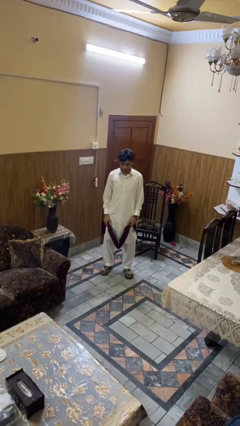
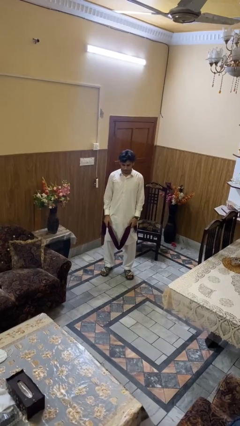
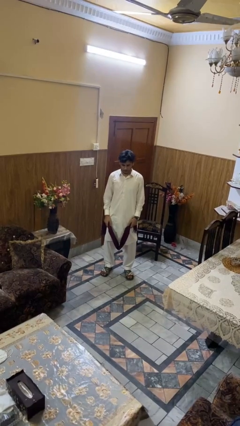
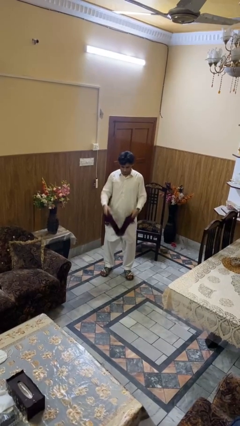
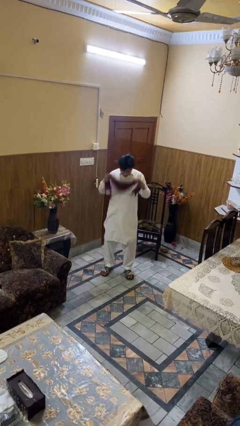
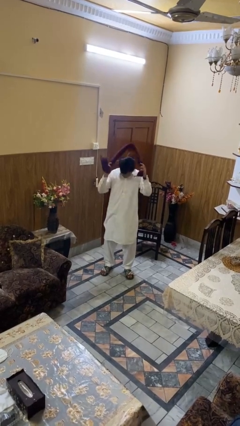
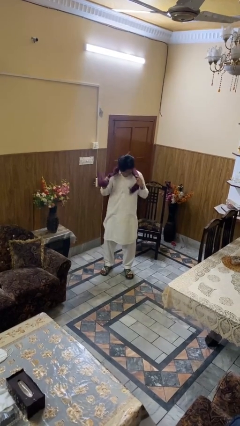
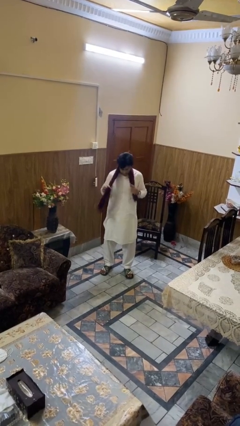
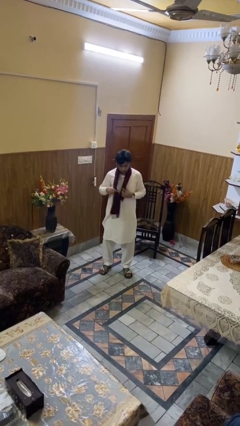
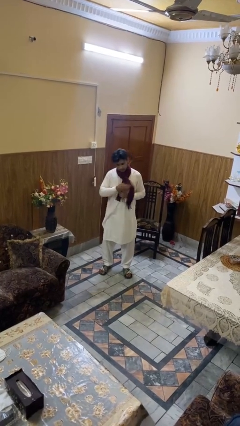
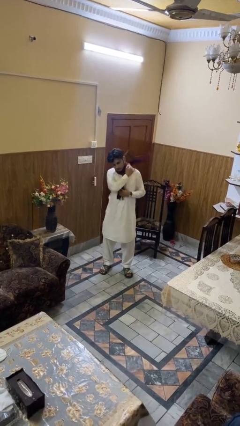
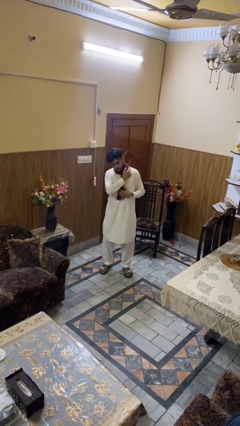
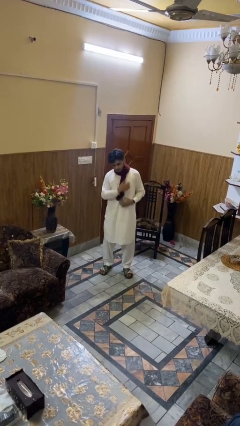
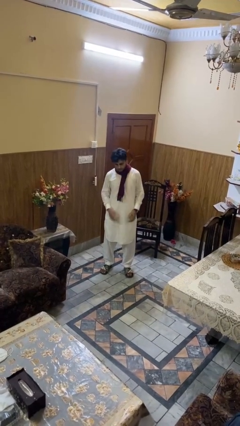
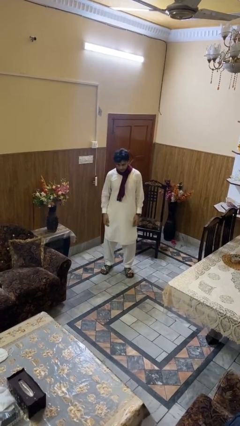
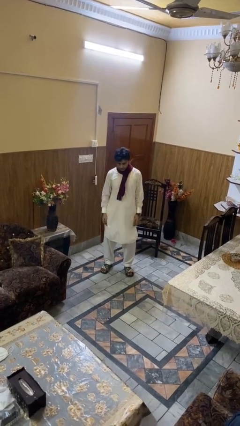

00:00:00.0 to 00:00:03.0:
person puts on scarf

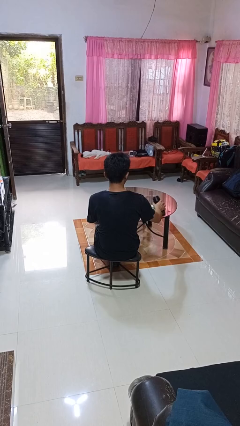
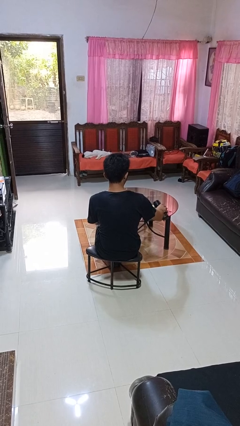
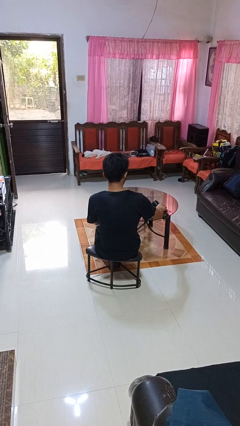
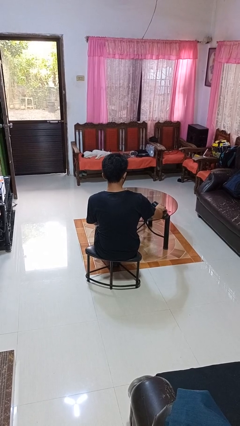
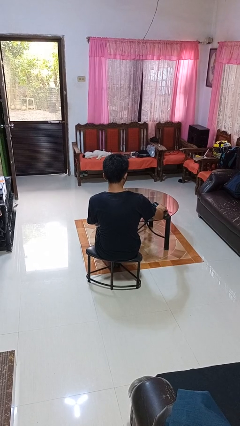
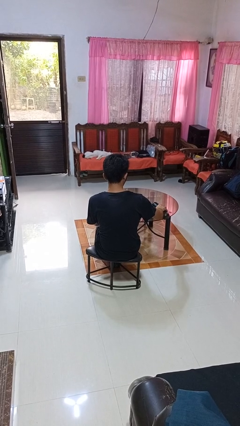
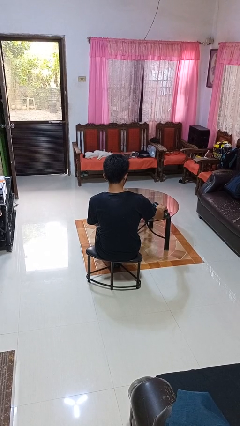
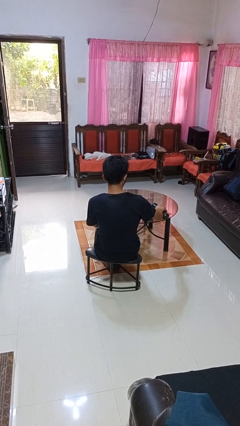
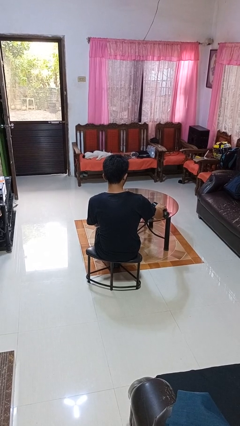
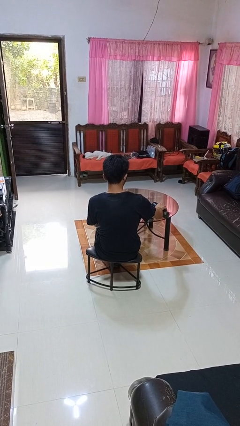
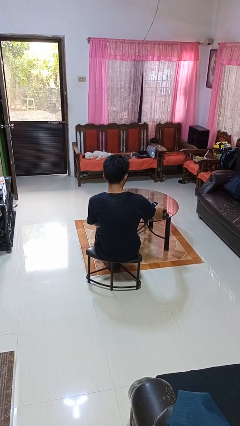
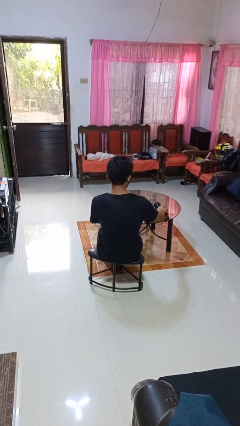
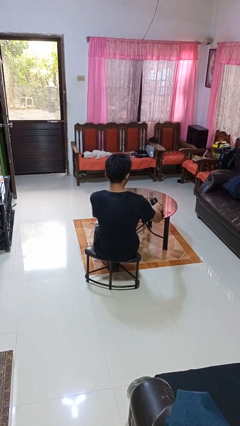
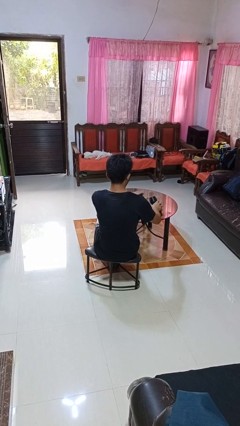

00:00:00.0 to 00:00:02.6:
person pours liquid into cup

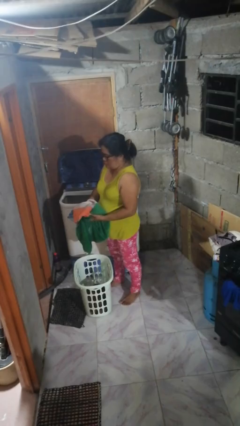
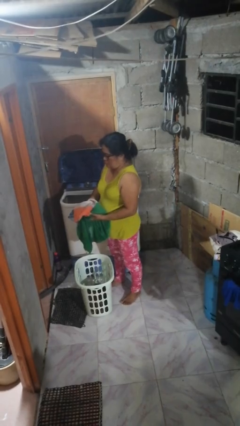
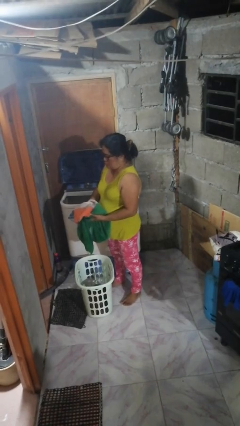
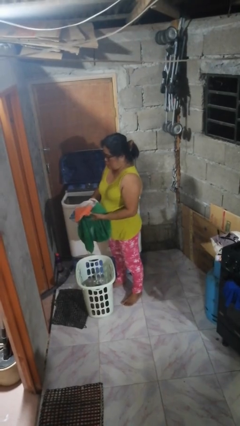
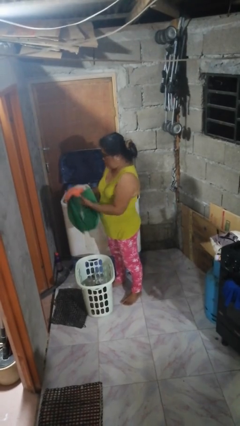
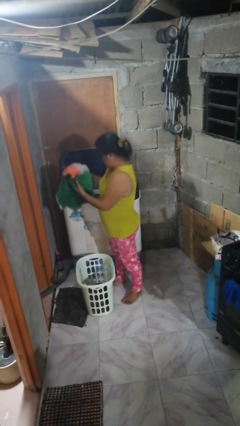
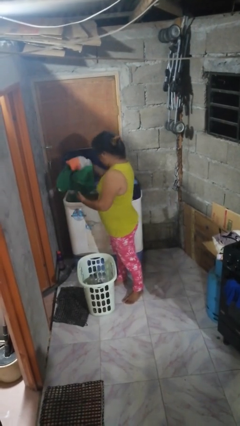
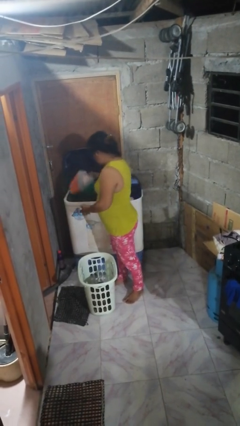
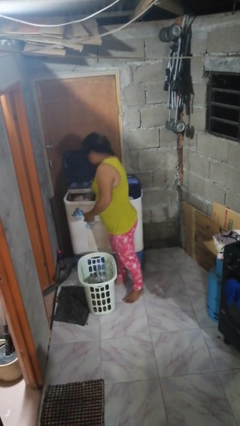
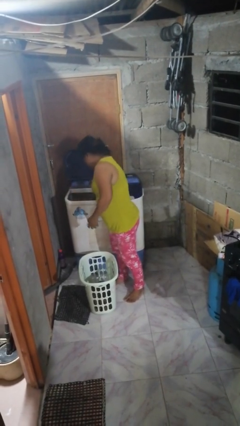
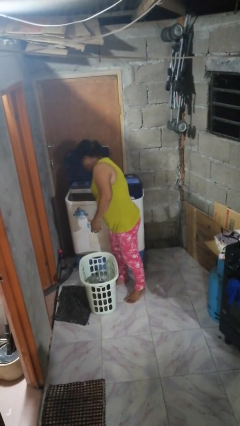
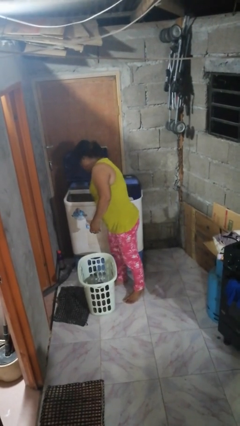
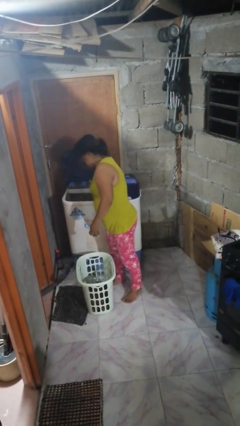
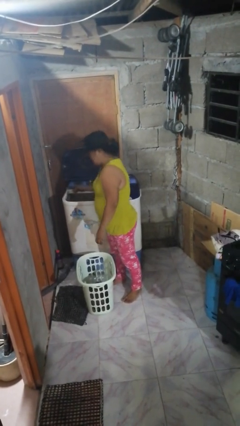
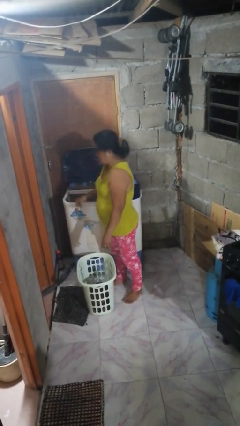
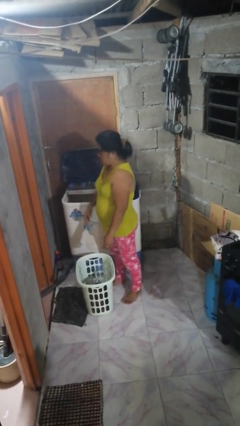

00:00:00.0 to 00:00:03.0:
person loads clotheswasher

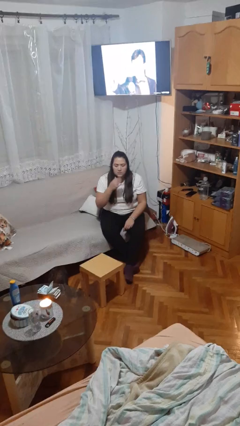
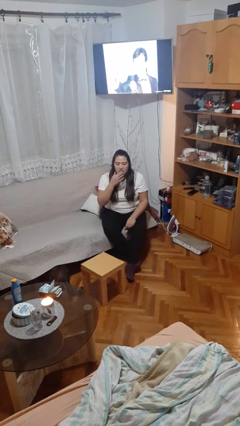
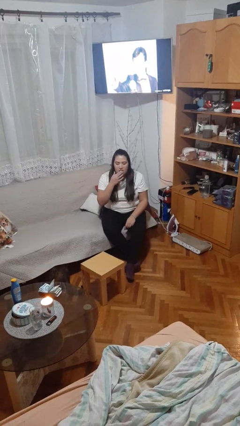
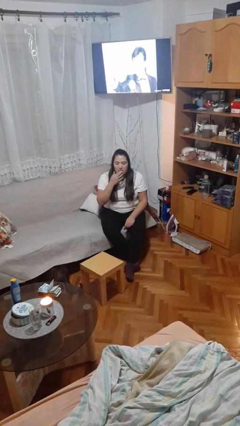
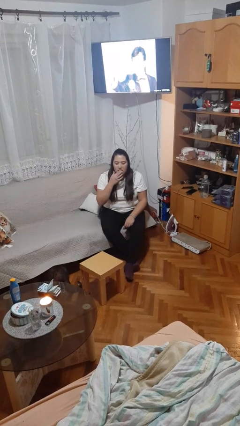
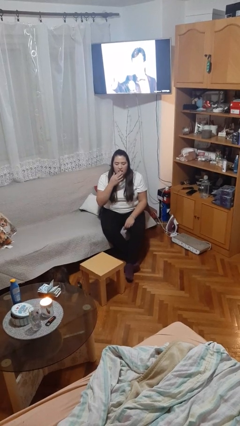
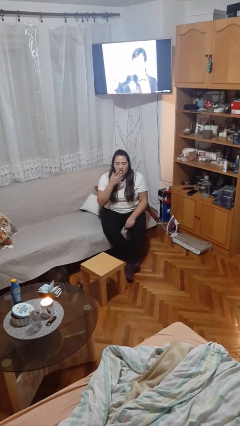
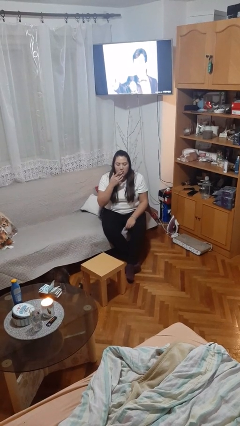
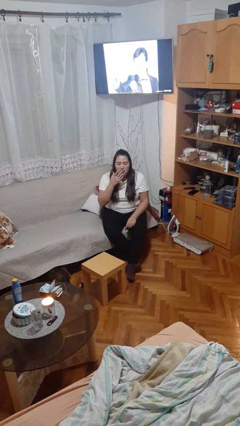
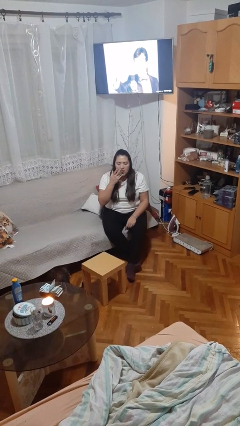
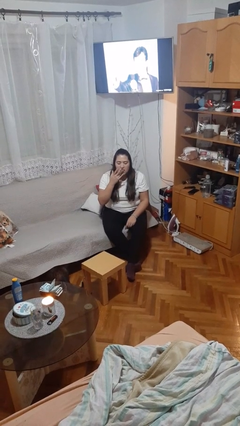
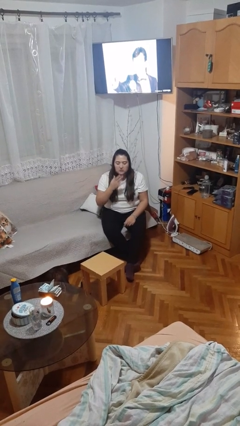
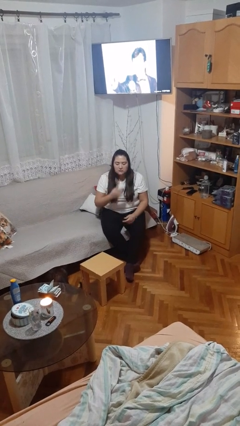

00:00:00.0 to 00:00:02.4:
person licks fingers

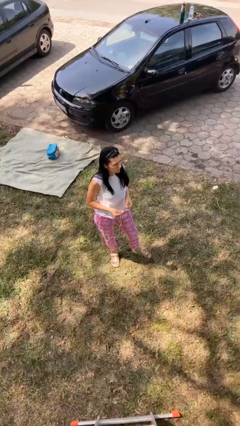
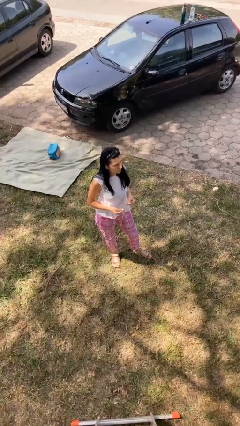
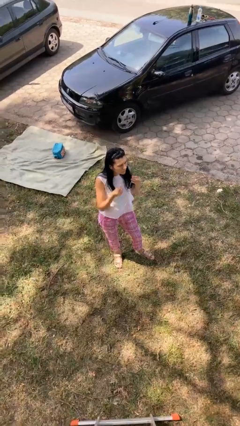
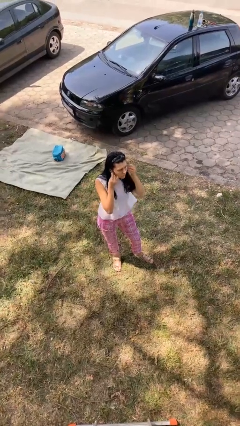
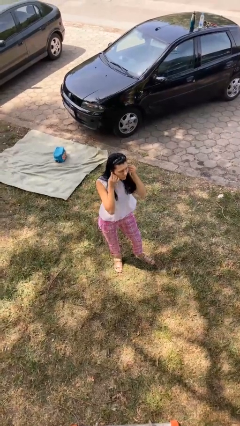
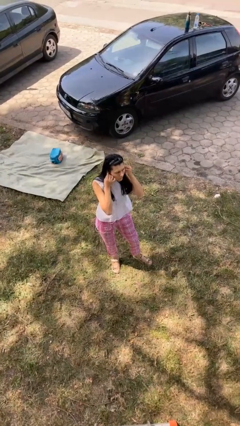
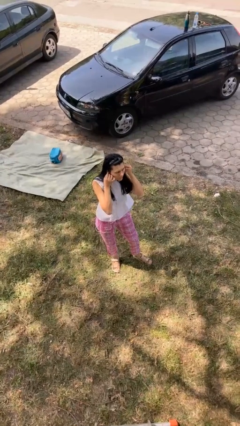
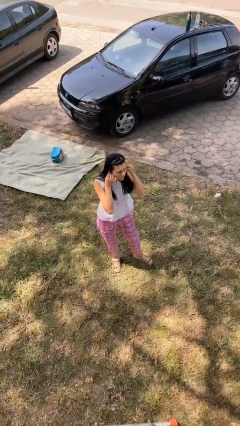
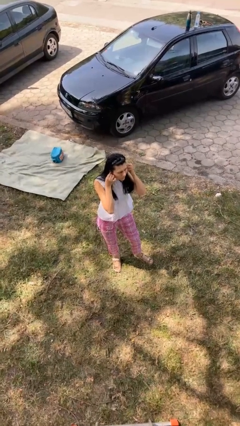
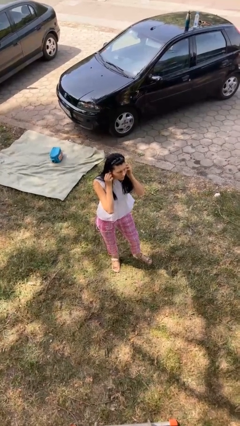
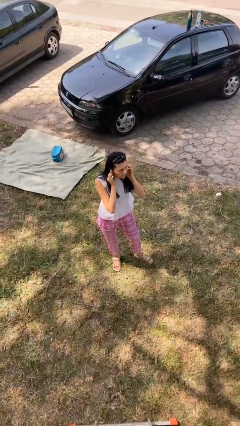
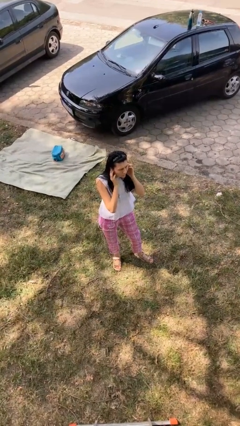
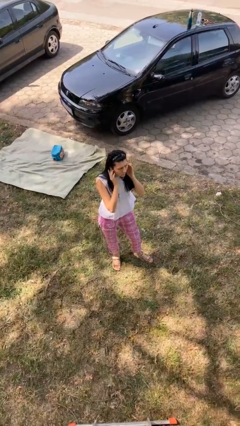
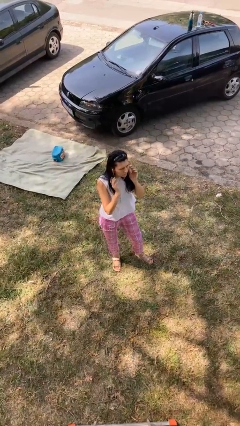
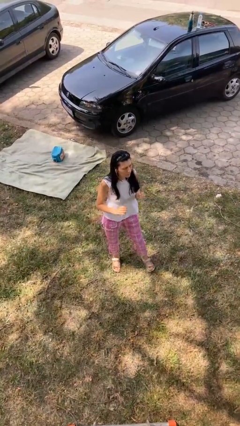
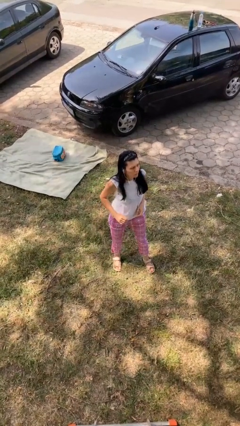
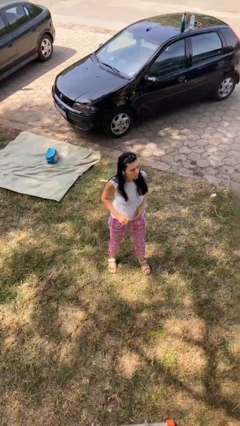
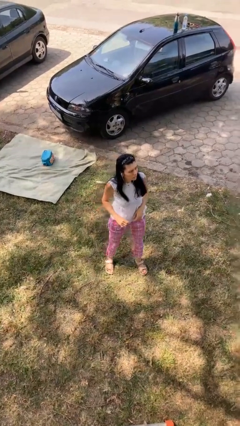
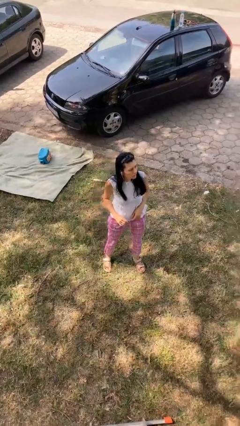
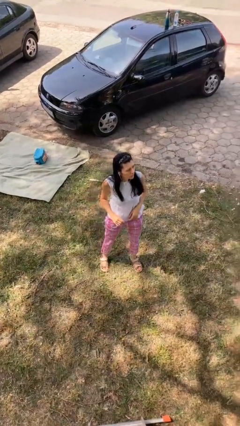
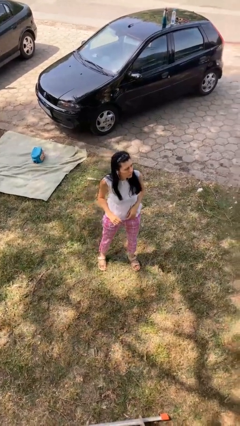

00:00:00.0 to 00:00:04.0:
person puts on headphones

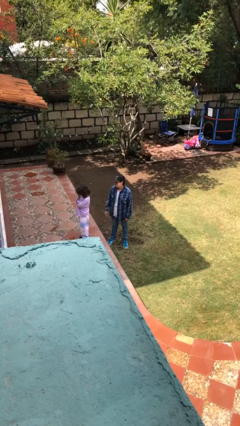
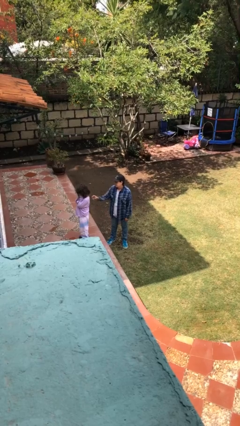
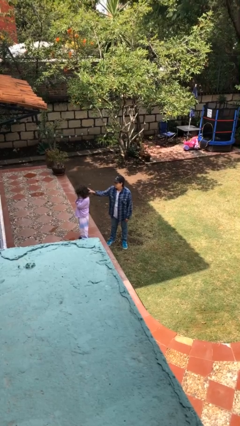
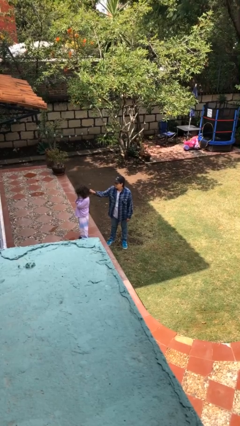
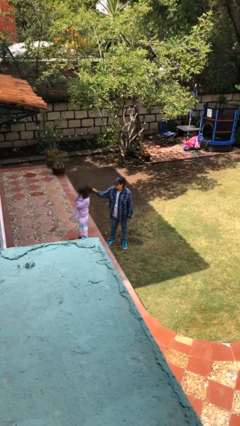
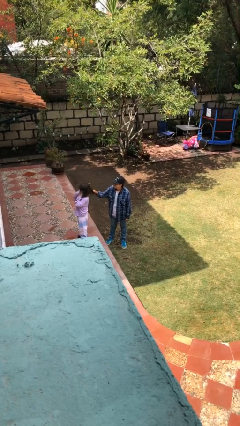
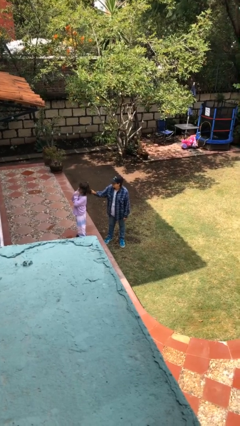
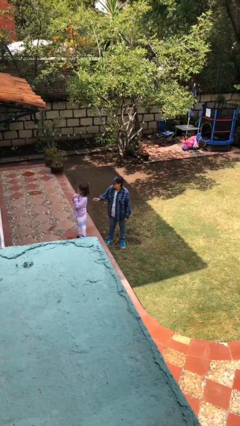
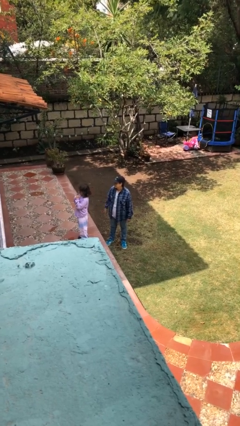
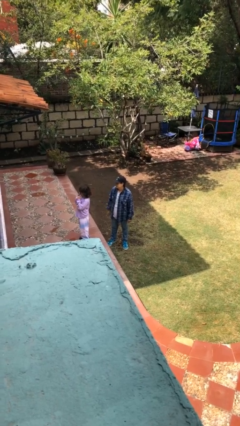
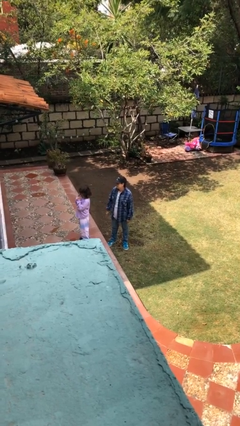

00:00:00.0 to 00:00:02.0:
person grabs person by hair

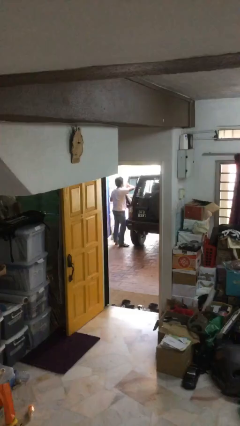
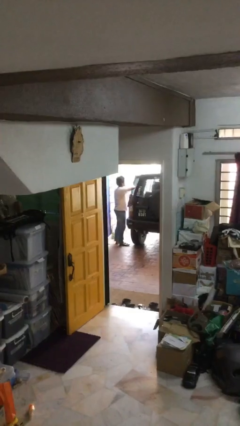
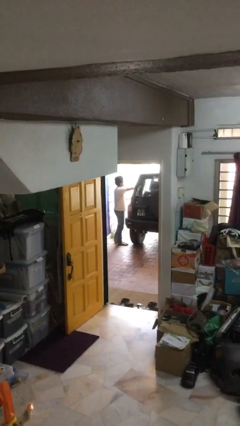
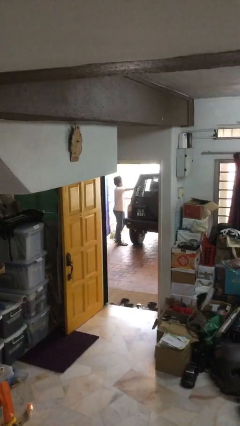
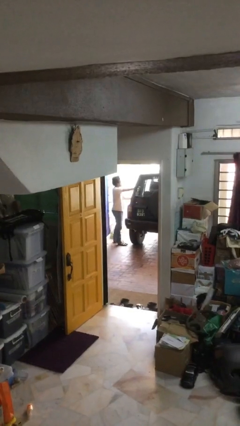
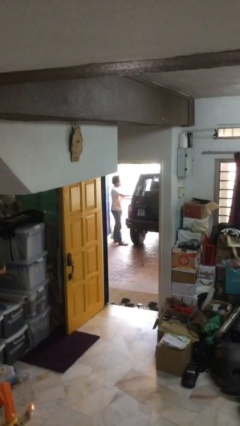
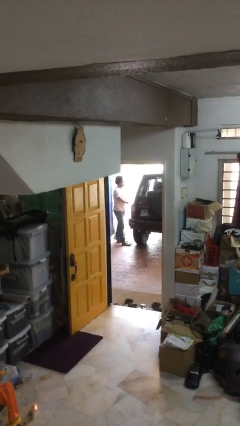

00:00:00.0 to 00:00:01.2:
person closes car door
